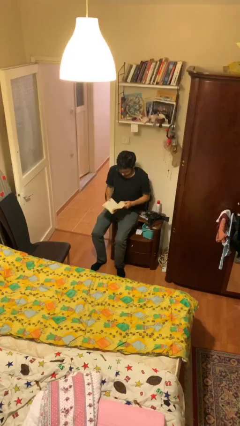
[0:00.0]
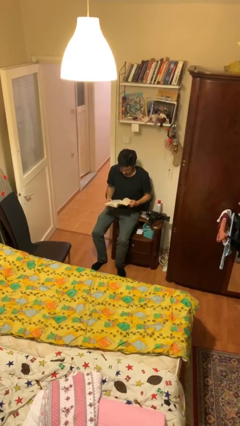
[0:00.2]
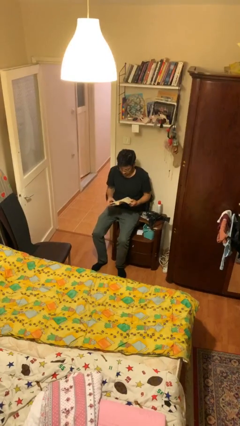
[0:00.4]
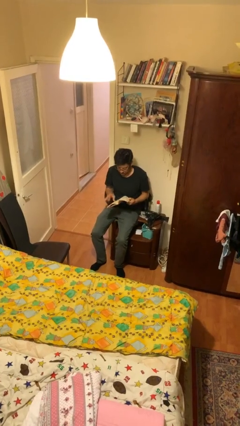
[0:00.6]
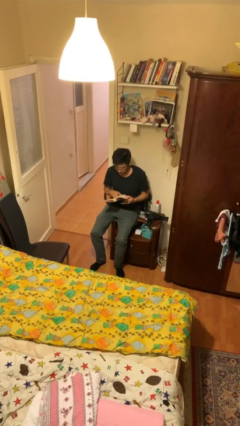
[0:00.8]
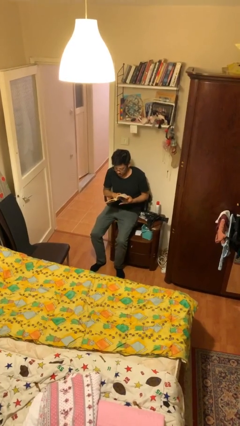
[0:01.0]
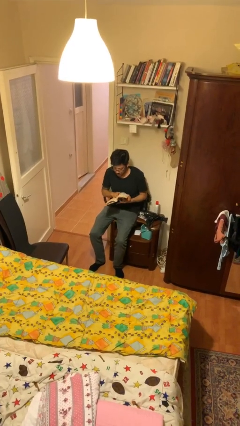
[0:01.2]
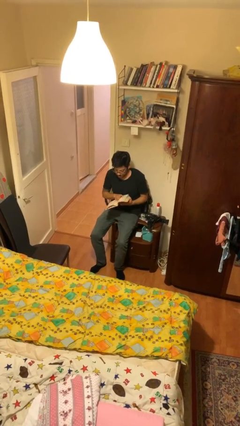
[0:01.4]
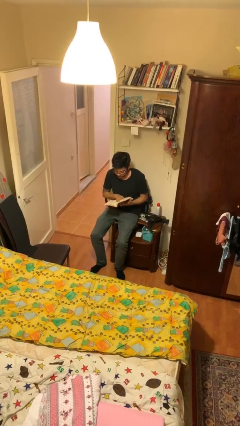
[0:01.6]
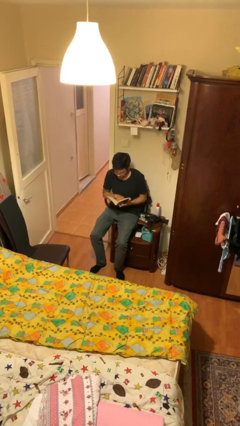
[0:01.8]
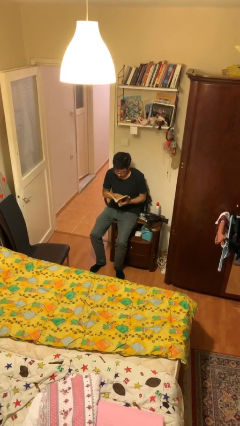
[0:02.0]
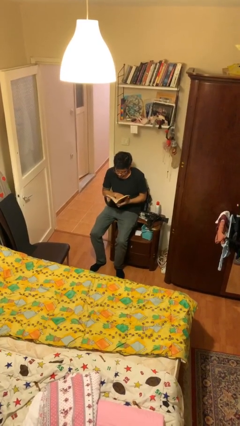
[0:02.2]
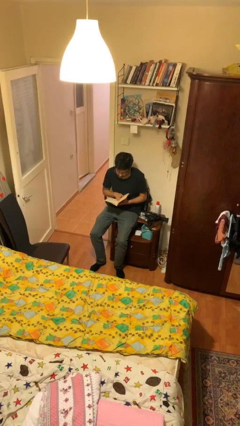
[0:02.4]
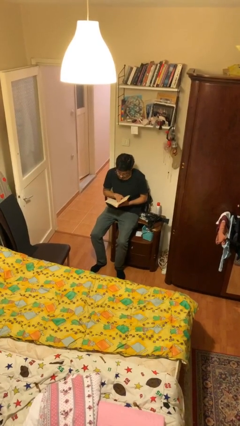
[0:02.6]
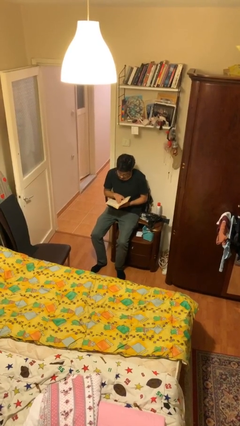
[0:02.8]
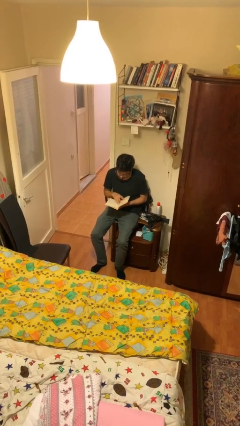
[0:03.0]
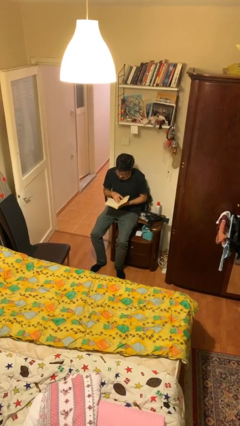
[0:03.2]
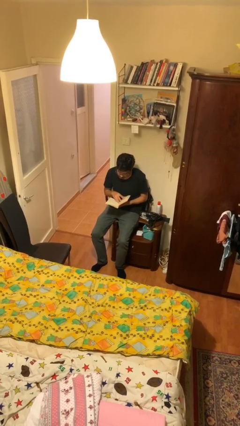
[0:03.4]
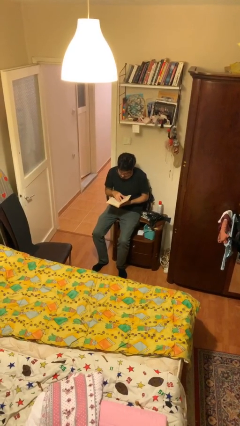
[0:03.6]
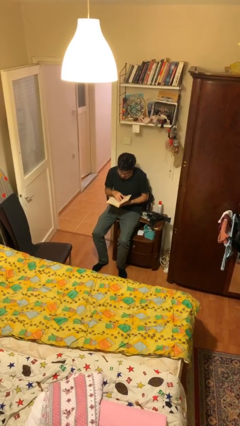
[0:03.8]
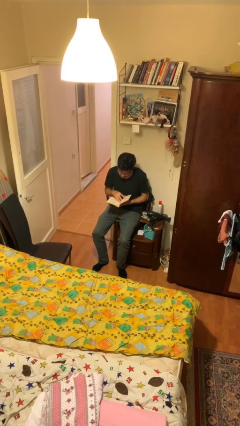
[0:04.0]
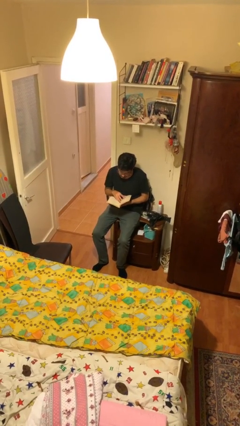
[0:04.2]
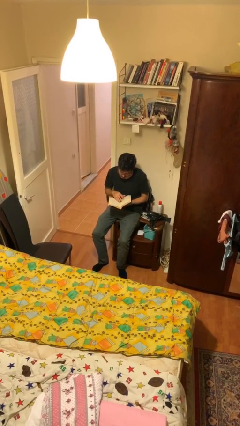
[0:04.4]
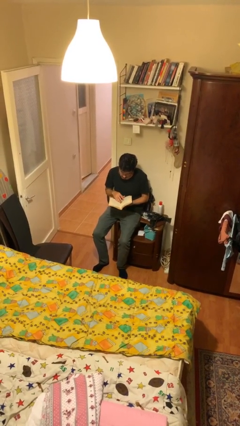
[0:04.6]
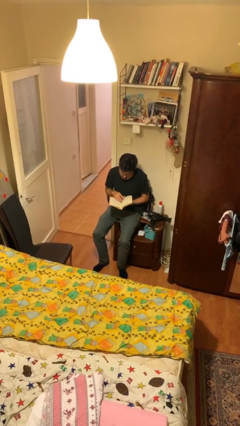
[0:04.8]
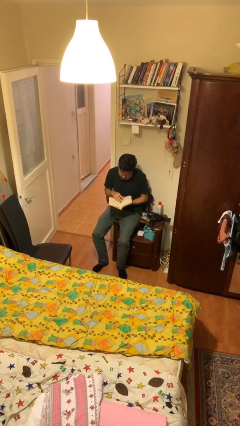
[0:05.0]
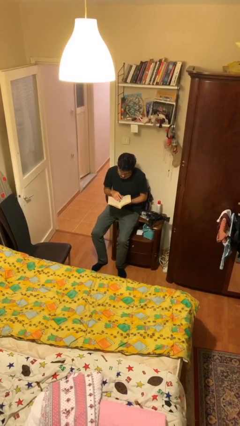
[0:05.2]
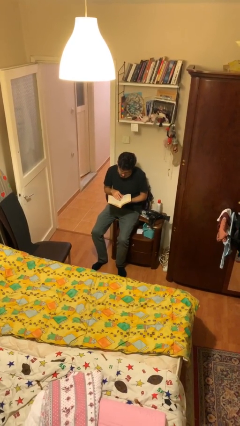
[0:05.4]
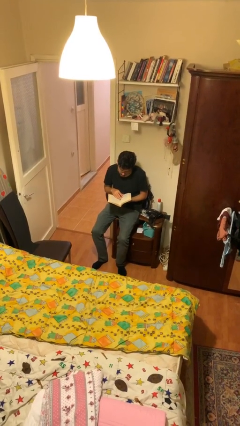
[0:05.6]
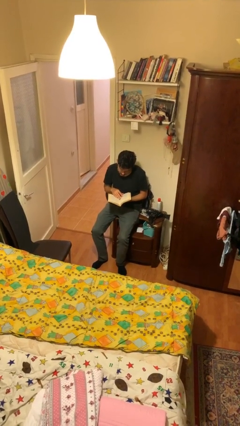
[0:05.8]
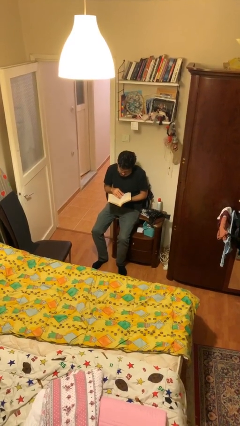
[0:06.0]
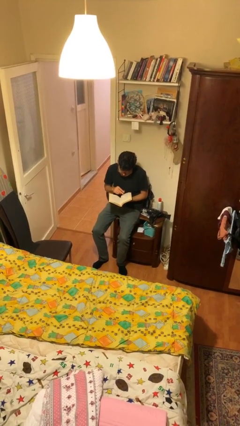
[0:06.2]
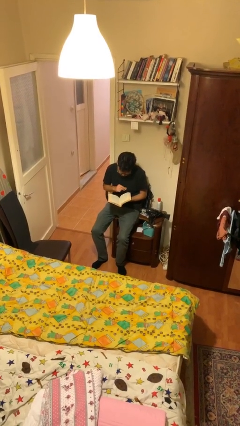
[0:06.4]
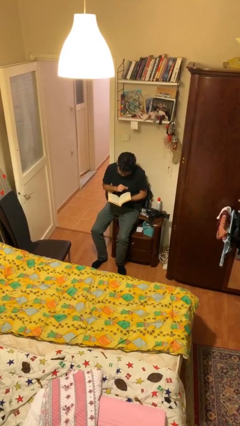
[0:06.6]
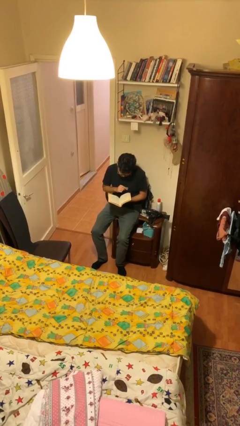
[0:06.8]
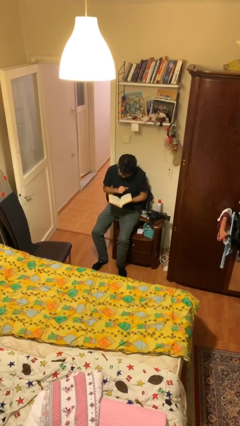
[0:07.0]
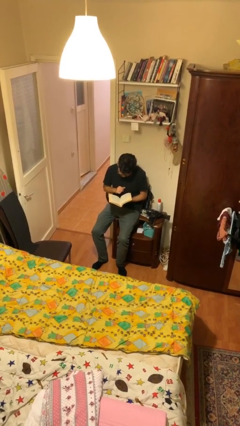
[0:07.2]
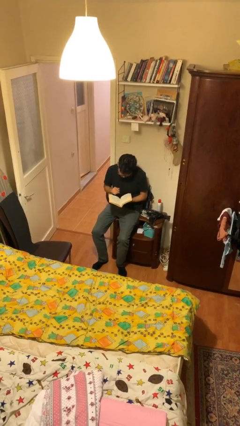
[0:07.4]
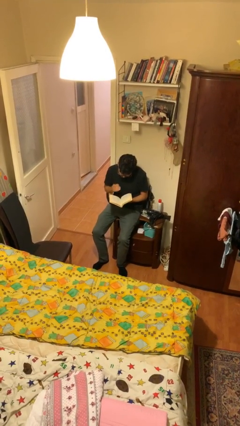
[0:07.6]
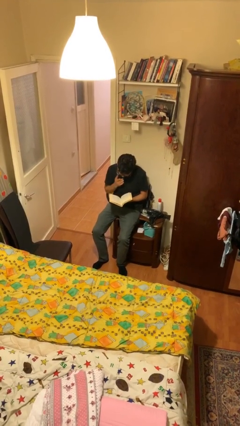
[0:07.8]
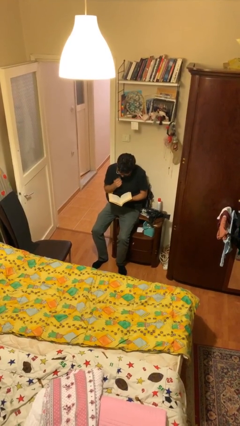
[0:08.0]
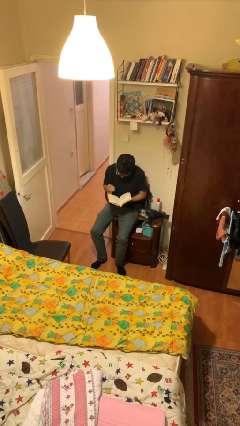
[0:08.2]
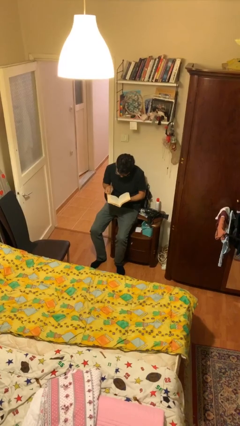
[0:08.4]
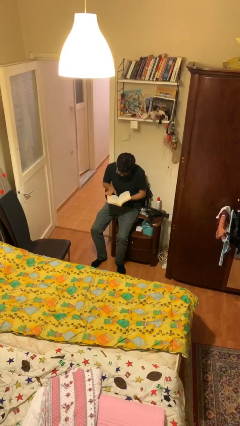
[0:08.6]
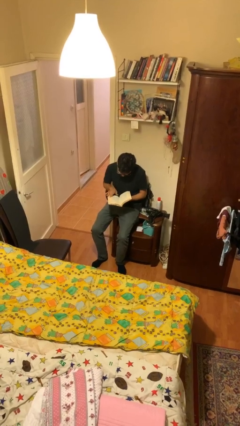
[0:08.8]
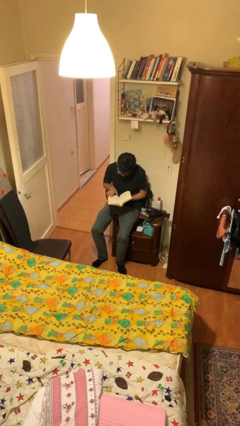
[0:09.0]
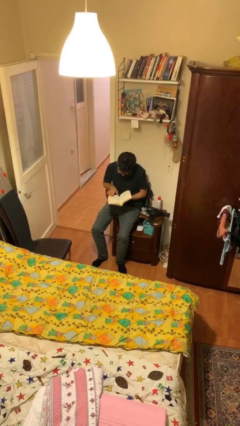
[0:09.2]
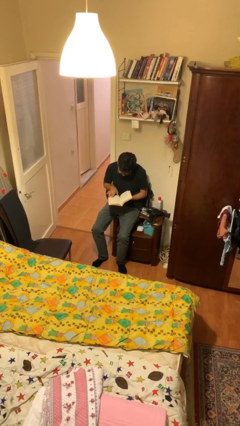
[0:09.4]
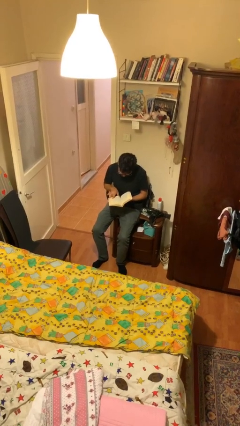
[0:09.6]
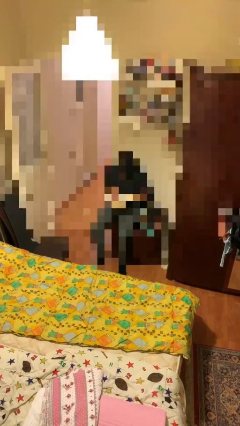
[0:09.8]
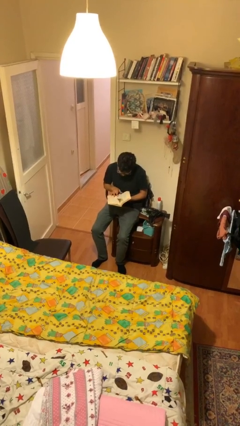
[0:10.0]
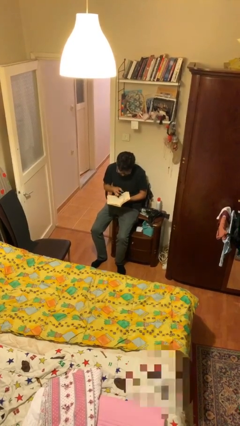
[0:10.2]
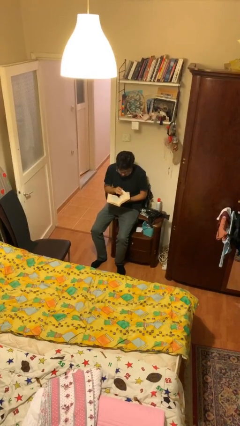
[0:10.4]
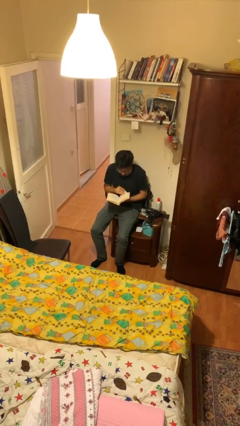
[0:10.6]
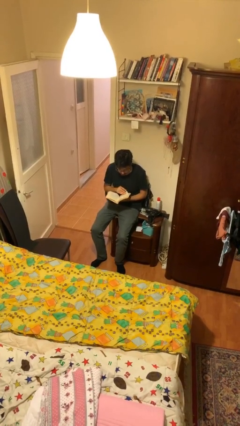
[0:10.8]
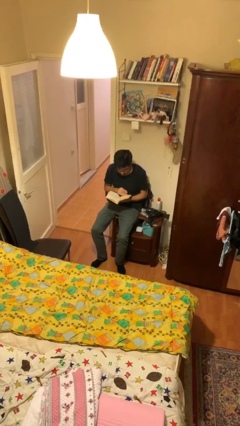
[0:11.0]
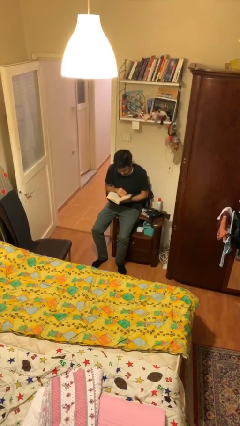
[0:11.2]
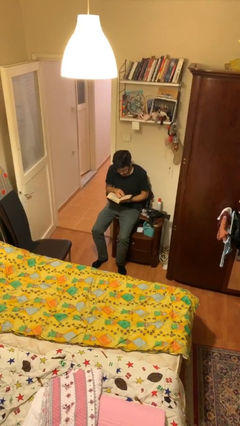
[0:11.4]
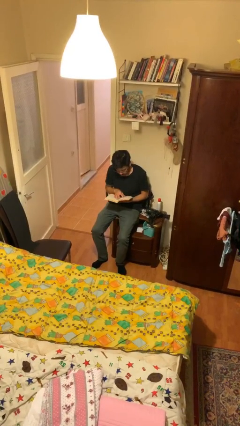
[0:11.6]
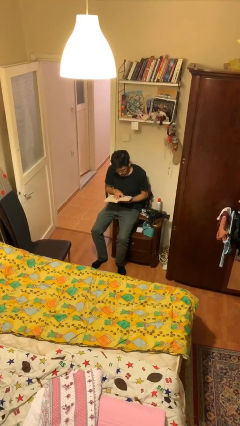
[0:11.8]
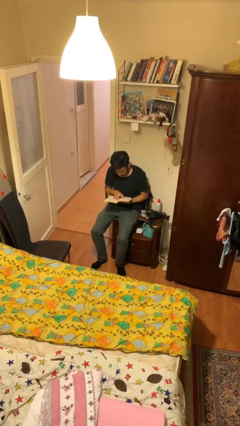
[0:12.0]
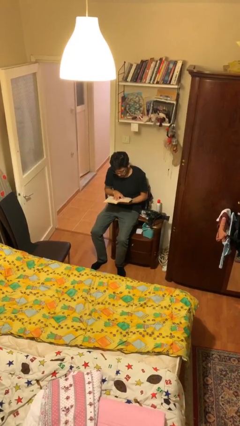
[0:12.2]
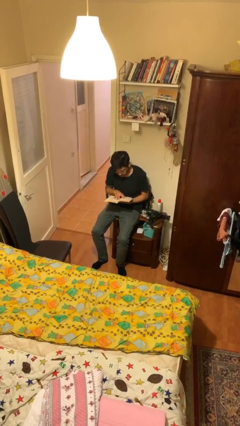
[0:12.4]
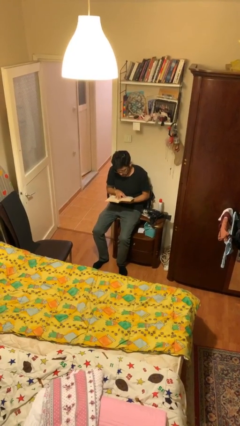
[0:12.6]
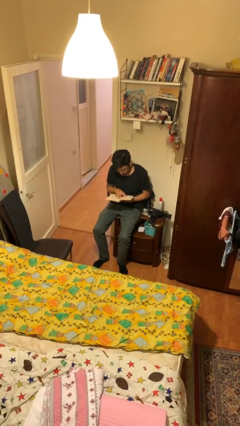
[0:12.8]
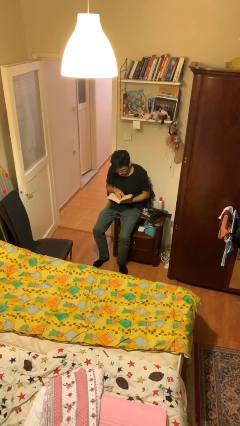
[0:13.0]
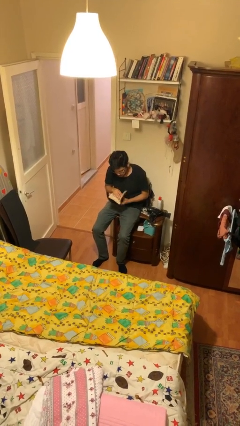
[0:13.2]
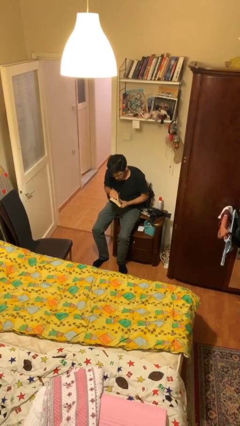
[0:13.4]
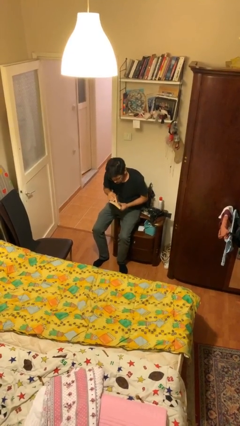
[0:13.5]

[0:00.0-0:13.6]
person reads document

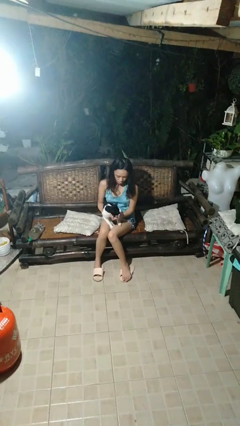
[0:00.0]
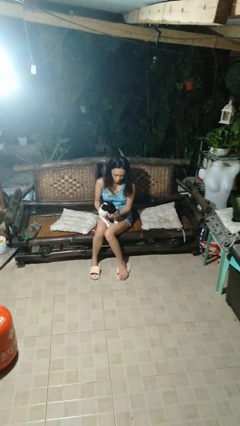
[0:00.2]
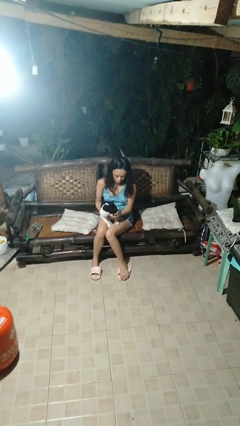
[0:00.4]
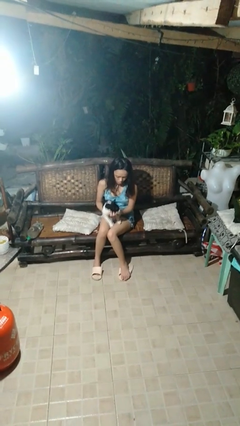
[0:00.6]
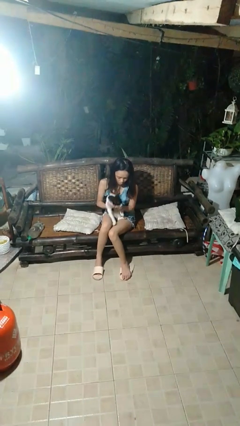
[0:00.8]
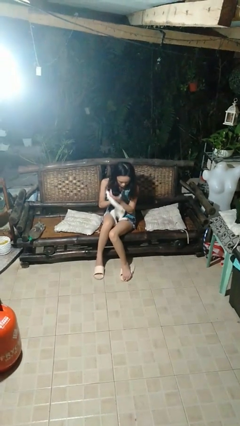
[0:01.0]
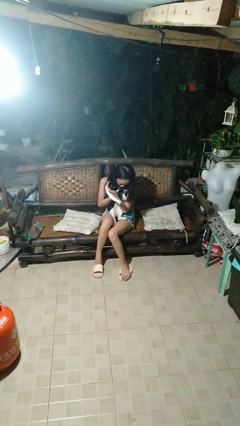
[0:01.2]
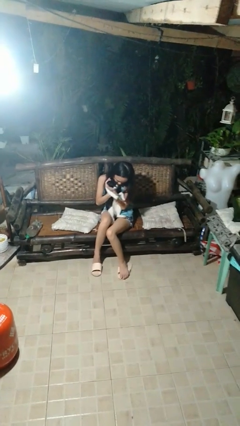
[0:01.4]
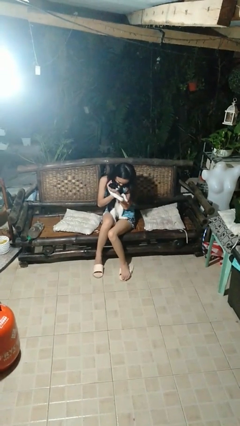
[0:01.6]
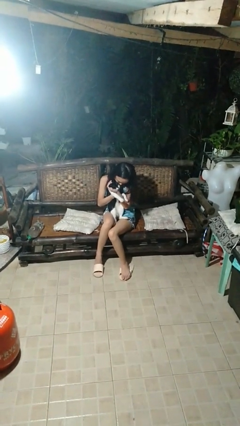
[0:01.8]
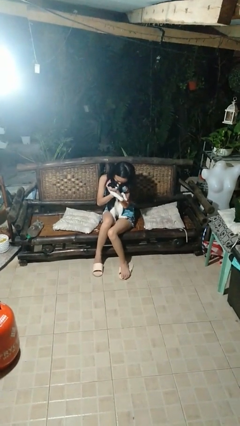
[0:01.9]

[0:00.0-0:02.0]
person hugs cat

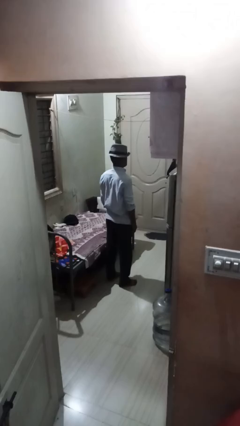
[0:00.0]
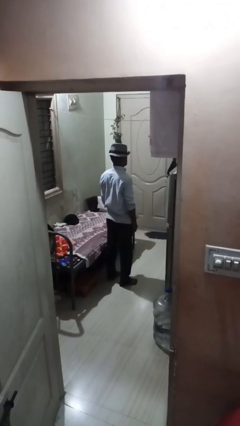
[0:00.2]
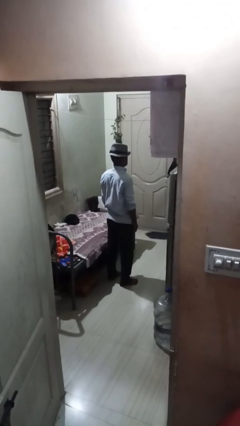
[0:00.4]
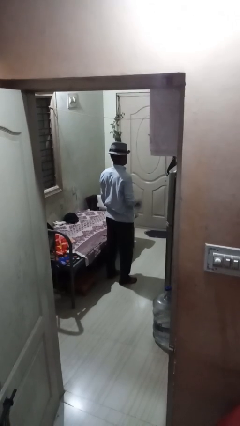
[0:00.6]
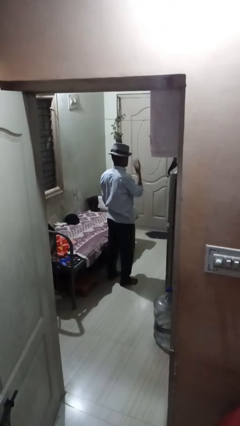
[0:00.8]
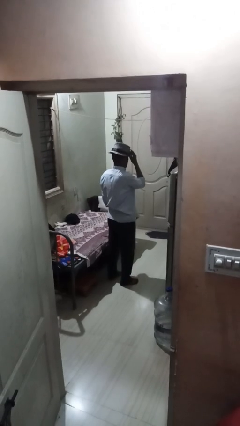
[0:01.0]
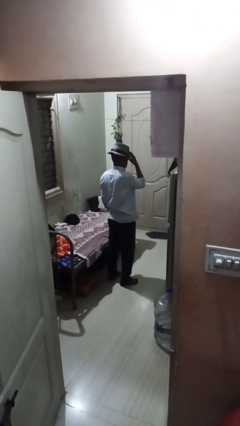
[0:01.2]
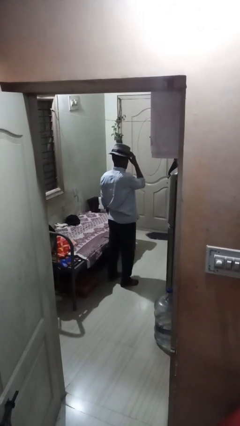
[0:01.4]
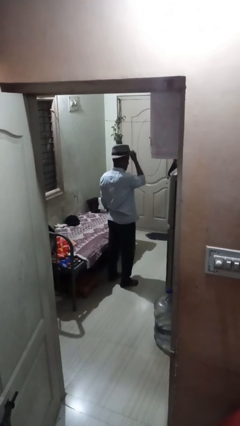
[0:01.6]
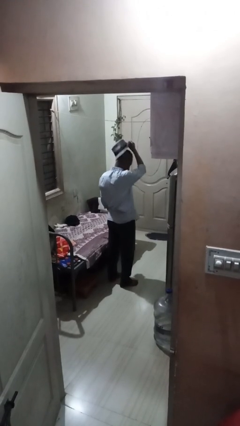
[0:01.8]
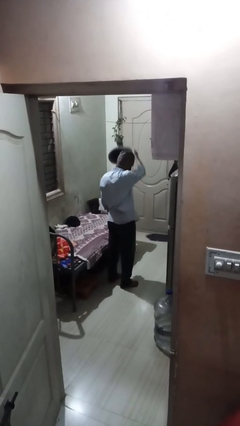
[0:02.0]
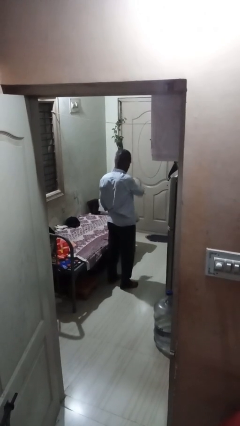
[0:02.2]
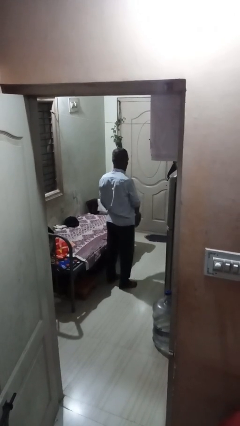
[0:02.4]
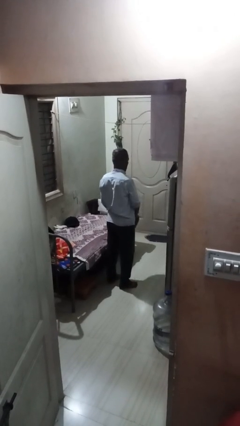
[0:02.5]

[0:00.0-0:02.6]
person takes off hat
